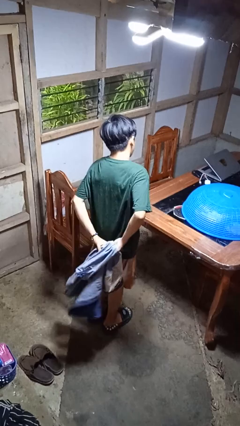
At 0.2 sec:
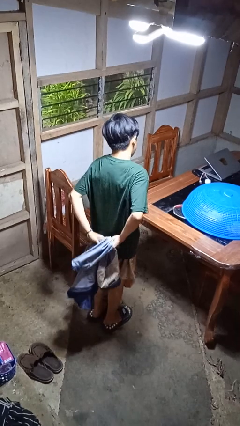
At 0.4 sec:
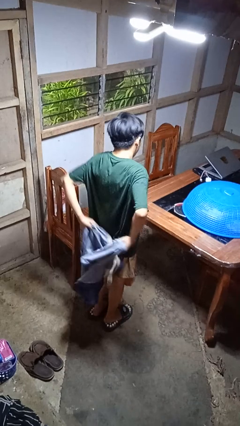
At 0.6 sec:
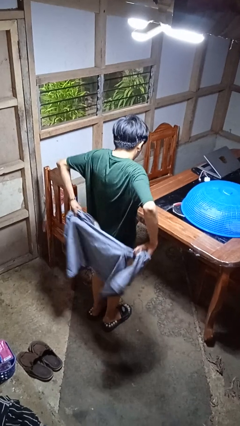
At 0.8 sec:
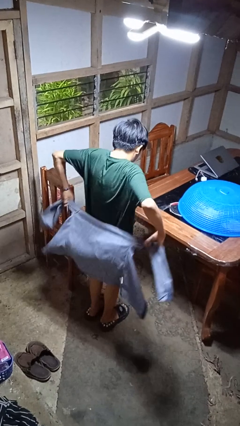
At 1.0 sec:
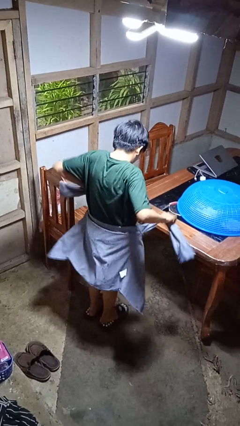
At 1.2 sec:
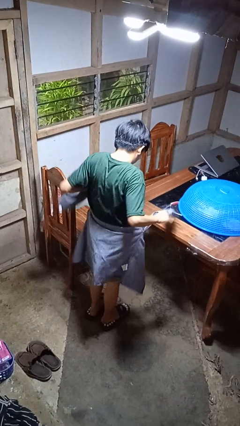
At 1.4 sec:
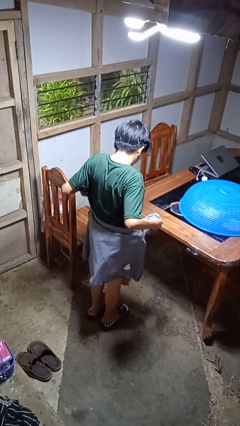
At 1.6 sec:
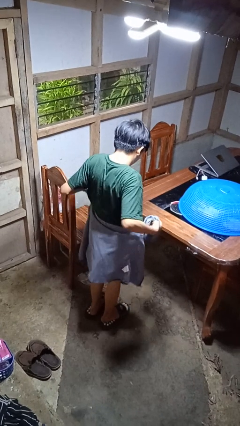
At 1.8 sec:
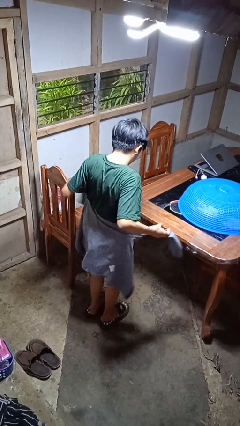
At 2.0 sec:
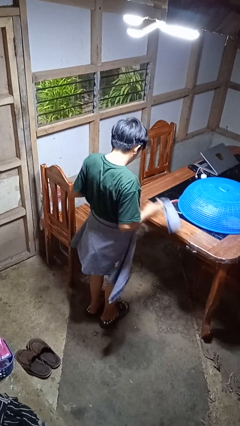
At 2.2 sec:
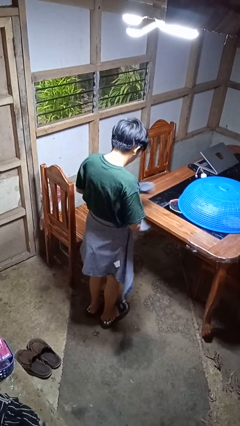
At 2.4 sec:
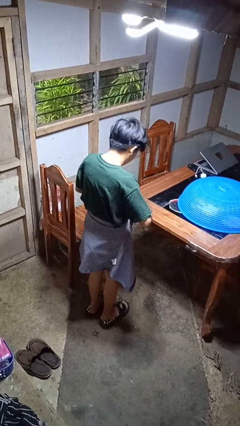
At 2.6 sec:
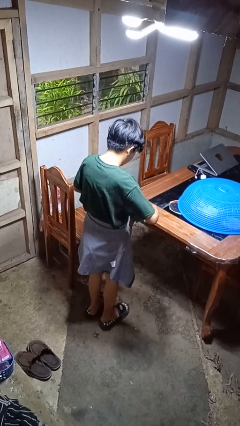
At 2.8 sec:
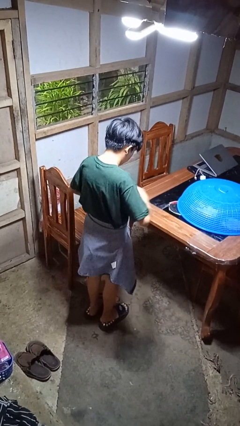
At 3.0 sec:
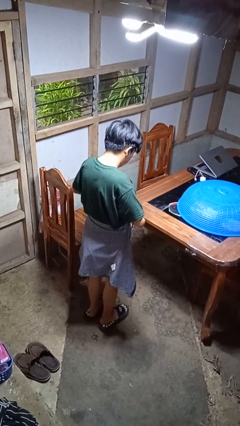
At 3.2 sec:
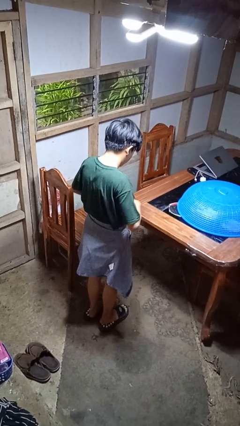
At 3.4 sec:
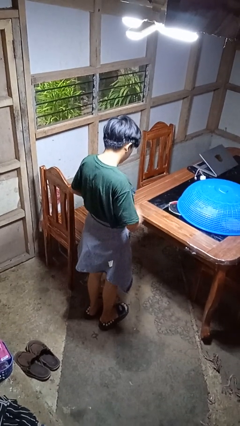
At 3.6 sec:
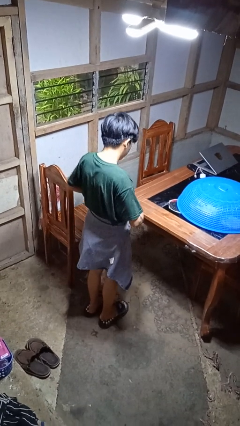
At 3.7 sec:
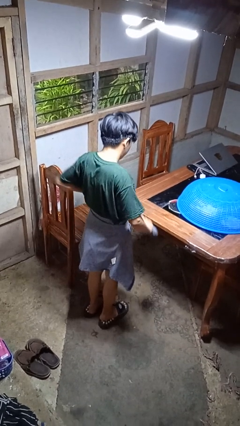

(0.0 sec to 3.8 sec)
person ties jacket around waist

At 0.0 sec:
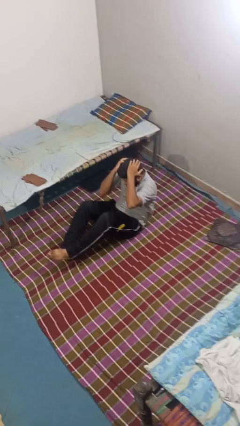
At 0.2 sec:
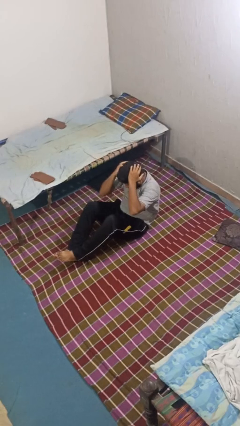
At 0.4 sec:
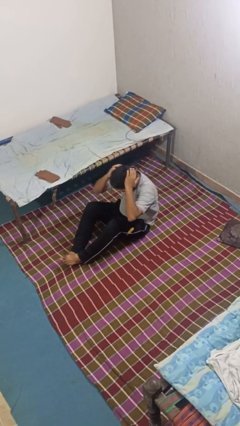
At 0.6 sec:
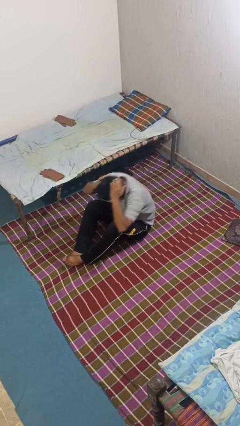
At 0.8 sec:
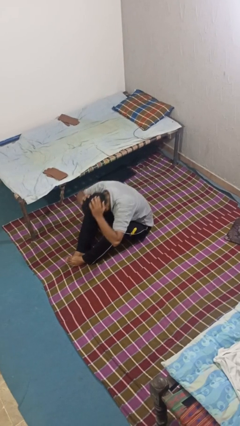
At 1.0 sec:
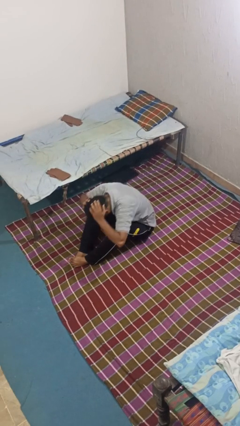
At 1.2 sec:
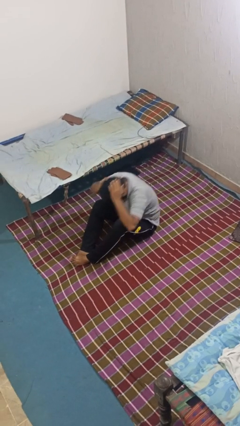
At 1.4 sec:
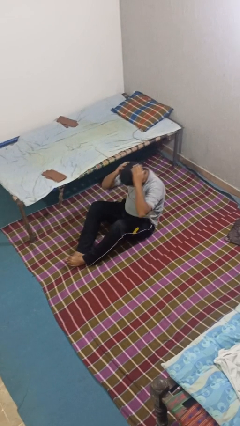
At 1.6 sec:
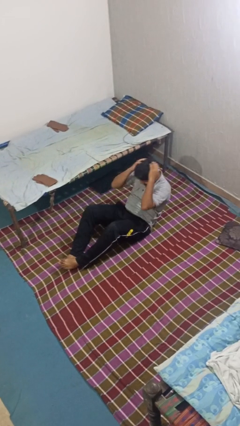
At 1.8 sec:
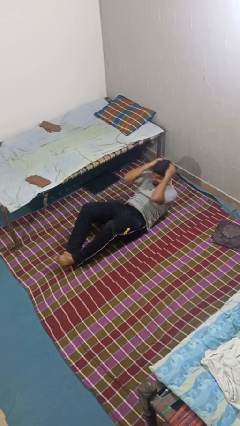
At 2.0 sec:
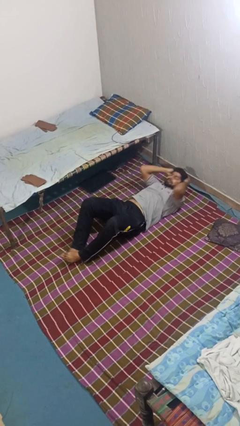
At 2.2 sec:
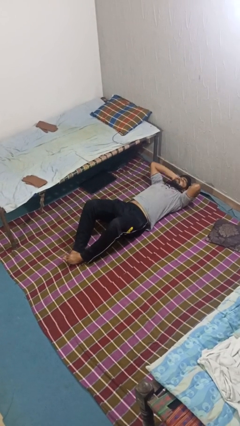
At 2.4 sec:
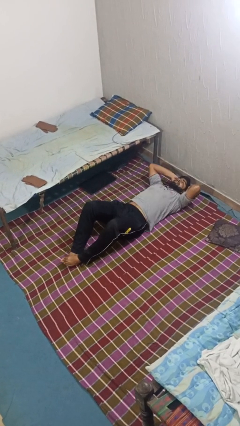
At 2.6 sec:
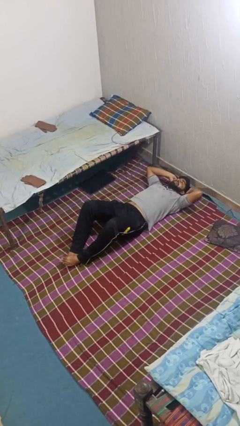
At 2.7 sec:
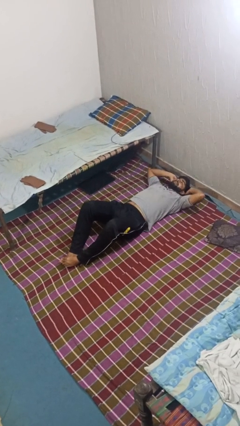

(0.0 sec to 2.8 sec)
person exercises with situp

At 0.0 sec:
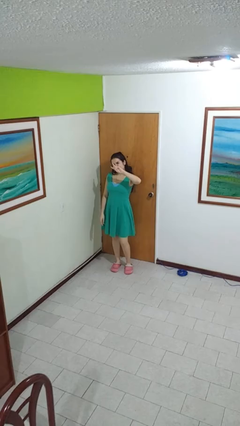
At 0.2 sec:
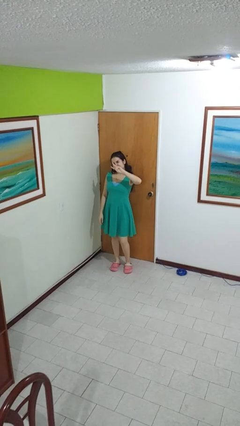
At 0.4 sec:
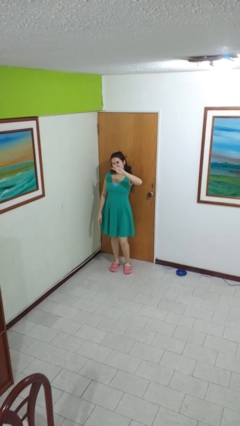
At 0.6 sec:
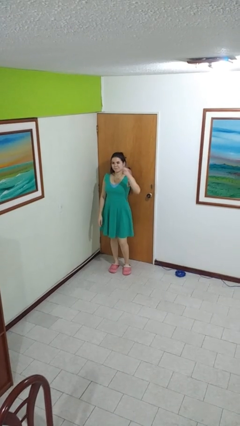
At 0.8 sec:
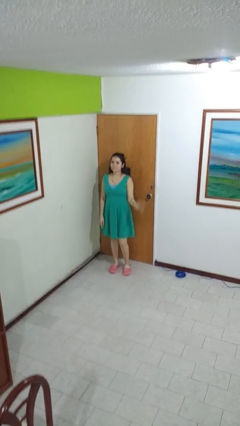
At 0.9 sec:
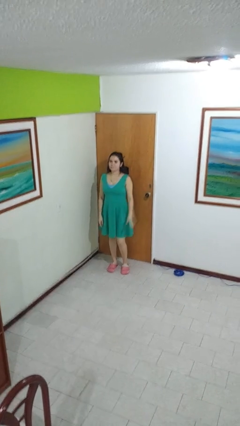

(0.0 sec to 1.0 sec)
person gestures peace

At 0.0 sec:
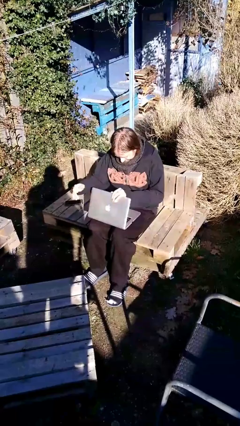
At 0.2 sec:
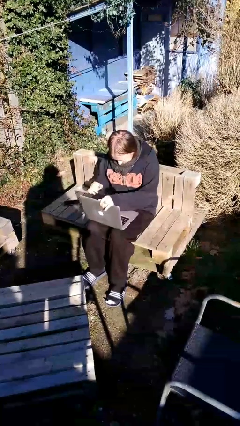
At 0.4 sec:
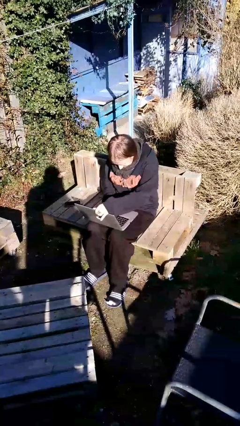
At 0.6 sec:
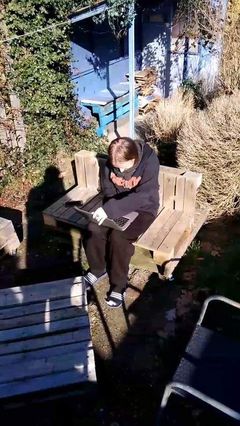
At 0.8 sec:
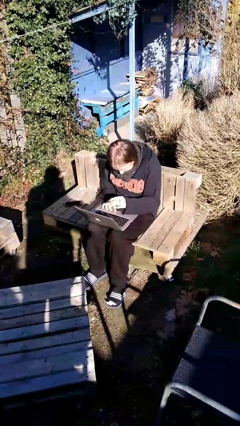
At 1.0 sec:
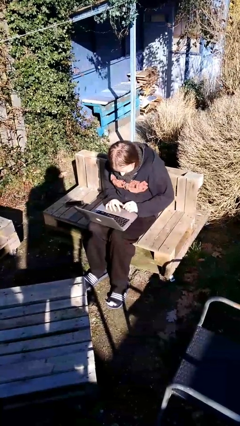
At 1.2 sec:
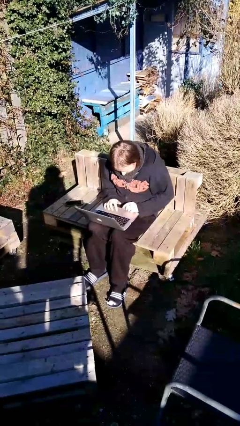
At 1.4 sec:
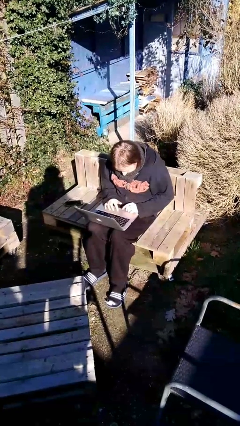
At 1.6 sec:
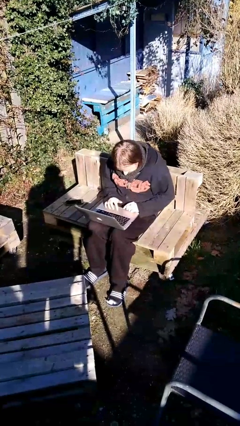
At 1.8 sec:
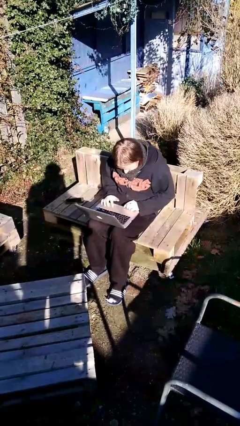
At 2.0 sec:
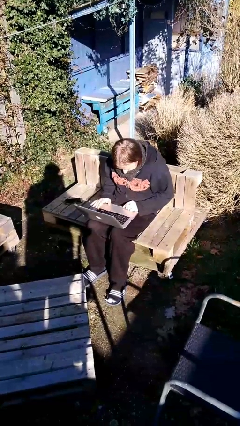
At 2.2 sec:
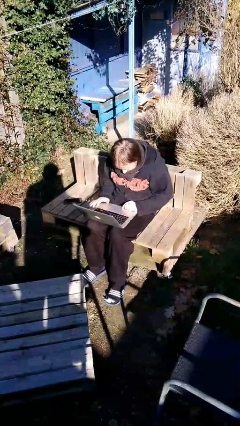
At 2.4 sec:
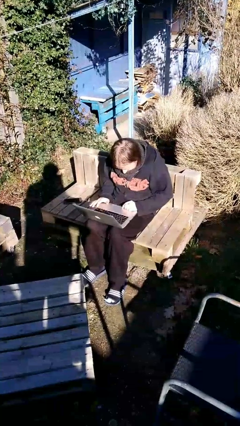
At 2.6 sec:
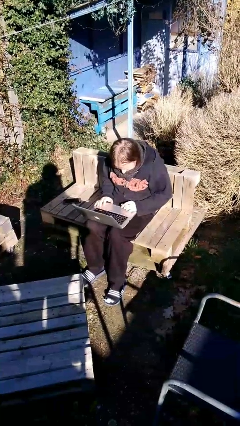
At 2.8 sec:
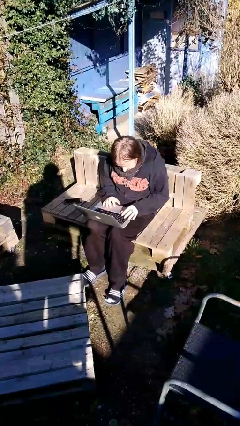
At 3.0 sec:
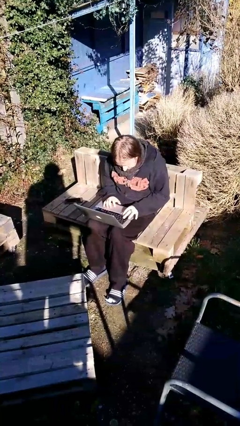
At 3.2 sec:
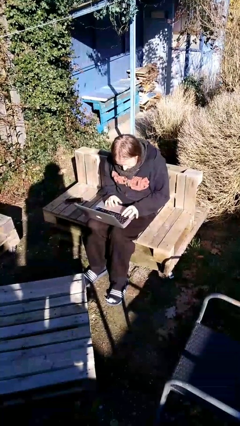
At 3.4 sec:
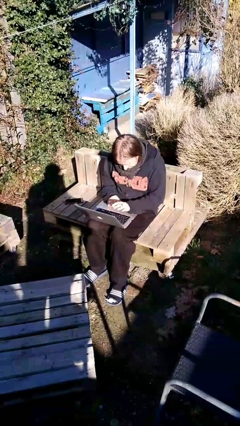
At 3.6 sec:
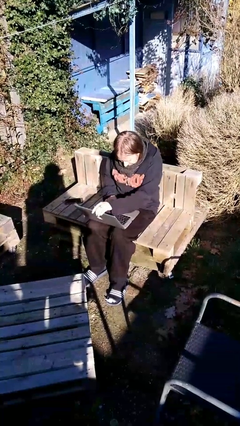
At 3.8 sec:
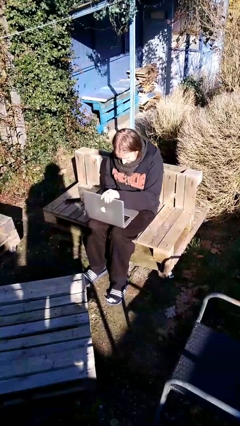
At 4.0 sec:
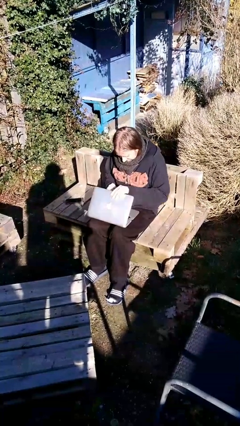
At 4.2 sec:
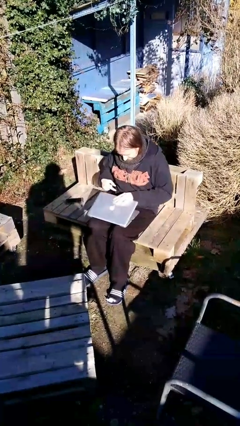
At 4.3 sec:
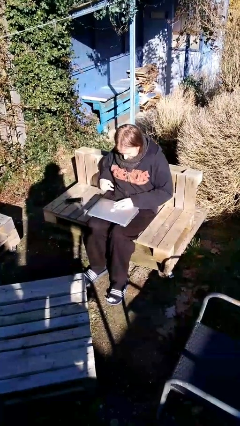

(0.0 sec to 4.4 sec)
person interacts with laptop

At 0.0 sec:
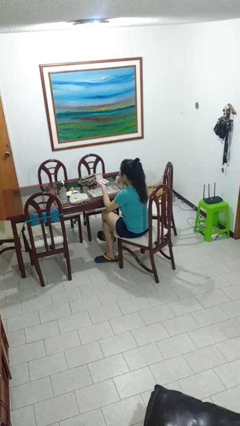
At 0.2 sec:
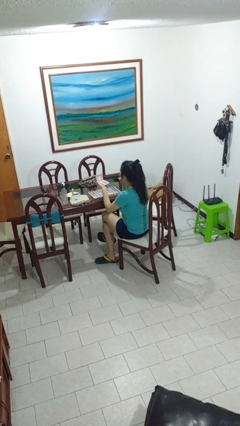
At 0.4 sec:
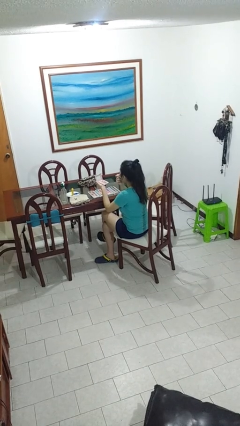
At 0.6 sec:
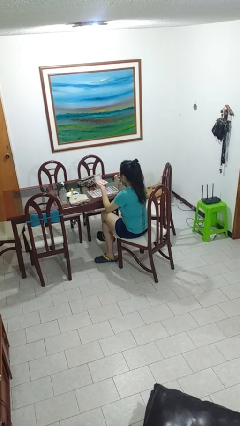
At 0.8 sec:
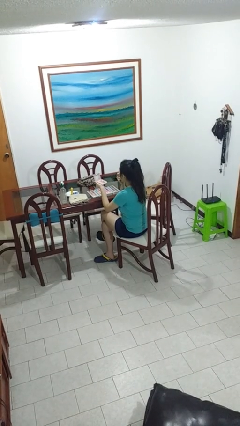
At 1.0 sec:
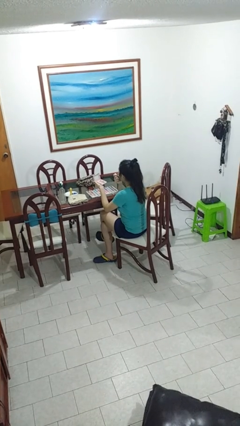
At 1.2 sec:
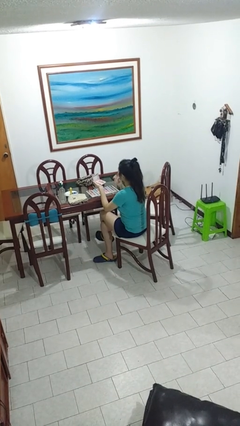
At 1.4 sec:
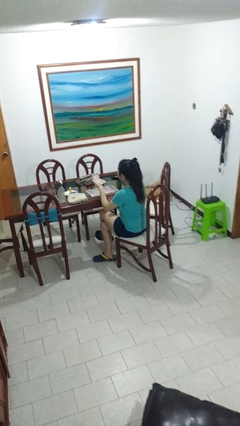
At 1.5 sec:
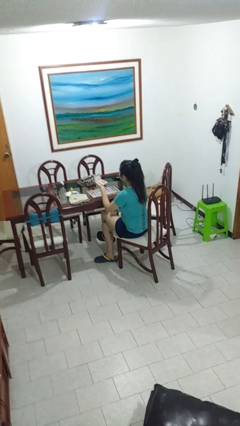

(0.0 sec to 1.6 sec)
person applies lip makeup

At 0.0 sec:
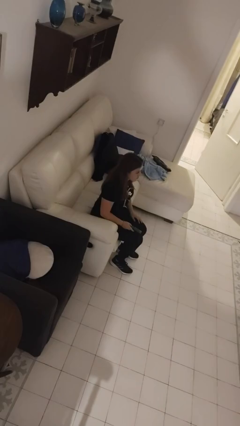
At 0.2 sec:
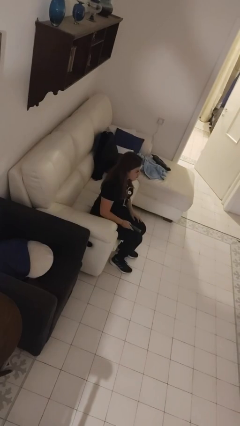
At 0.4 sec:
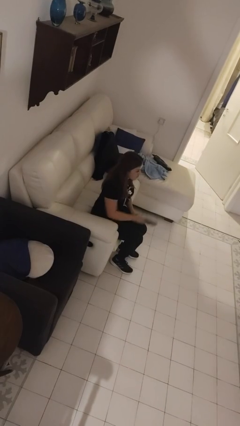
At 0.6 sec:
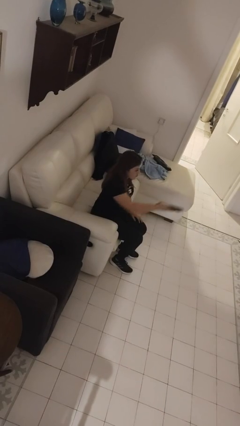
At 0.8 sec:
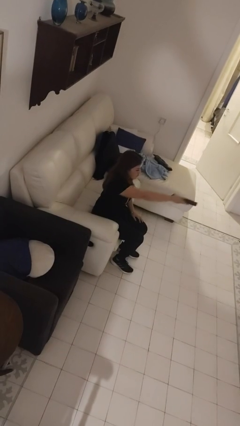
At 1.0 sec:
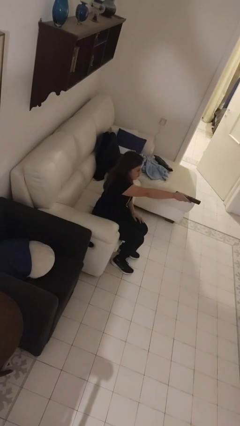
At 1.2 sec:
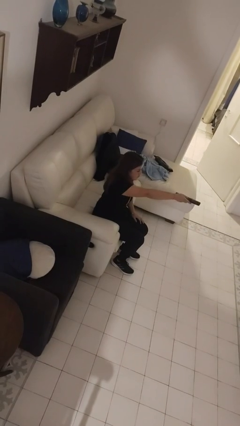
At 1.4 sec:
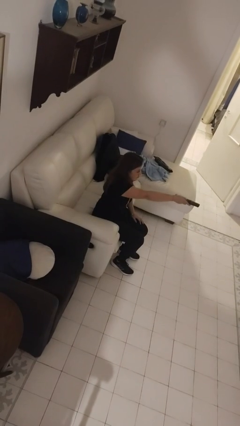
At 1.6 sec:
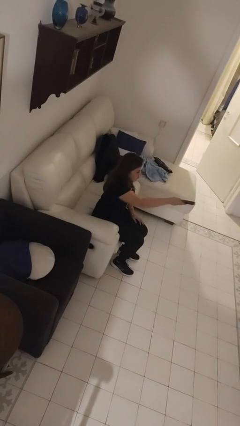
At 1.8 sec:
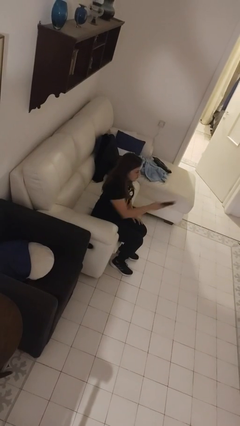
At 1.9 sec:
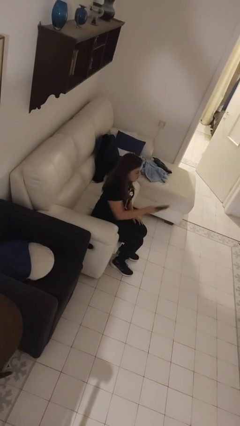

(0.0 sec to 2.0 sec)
person uses television remote

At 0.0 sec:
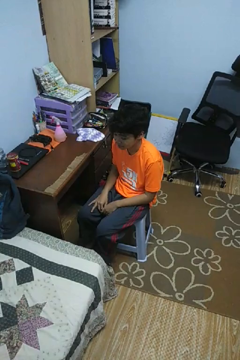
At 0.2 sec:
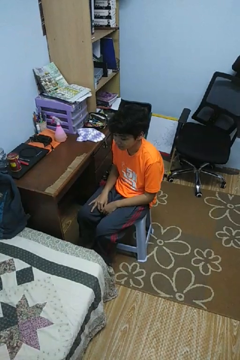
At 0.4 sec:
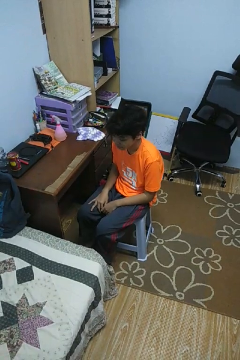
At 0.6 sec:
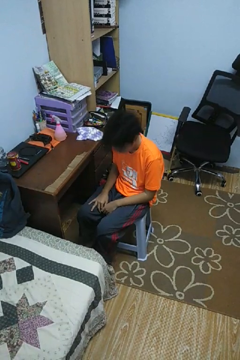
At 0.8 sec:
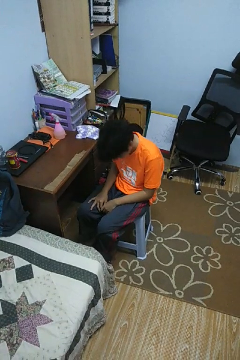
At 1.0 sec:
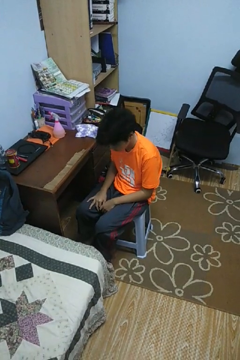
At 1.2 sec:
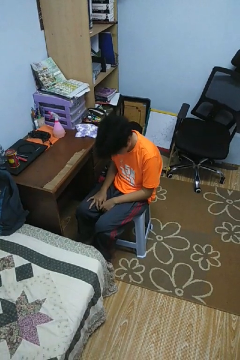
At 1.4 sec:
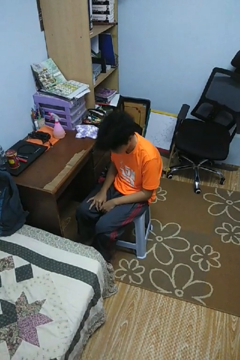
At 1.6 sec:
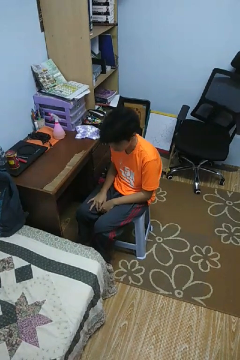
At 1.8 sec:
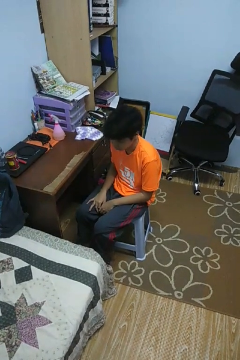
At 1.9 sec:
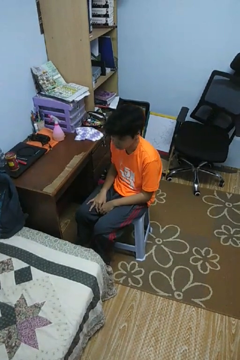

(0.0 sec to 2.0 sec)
person nods head
